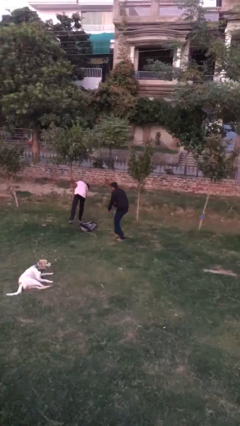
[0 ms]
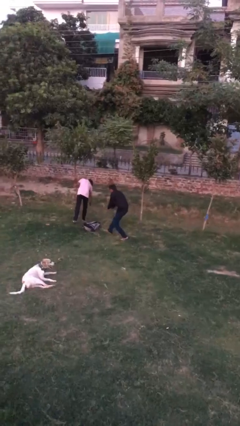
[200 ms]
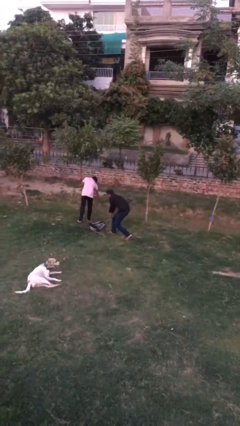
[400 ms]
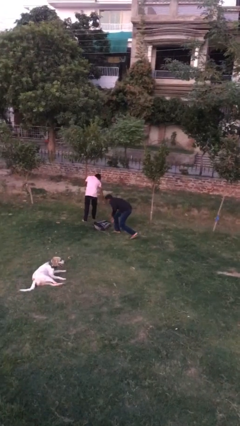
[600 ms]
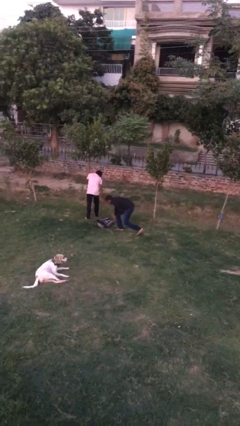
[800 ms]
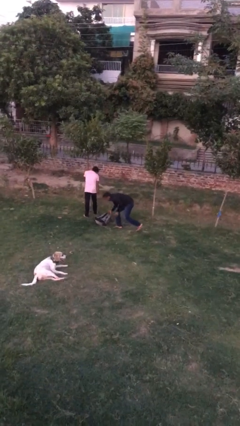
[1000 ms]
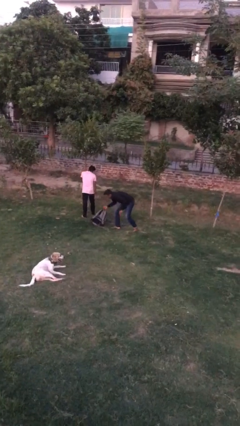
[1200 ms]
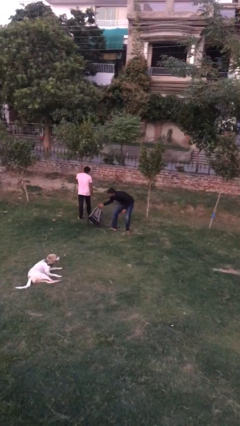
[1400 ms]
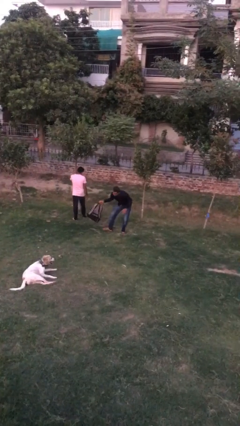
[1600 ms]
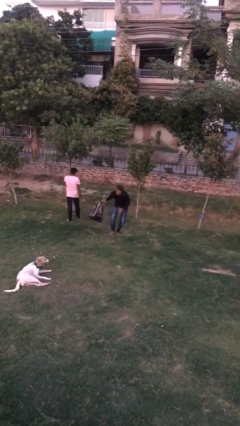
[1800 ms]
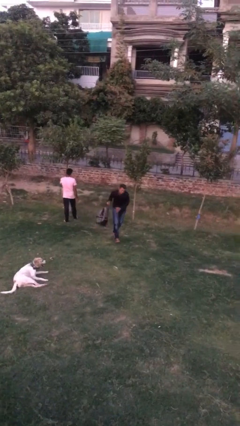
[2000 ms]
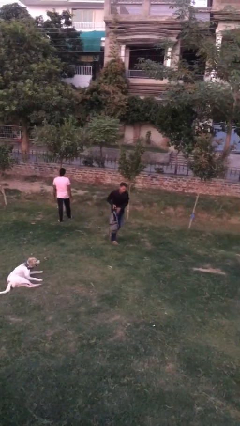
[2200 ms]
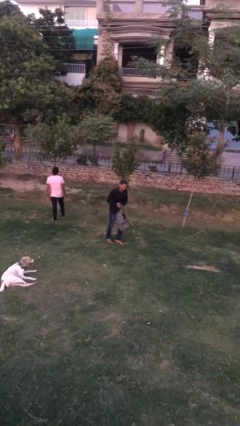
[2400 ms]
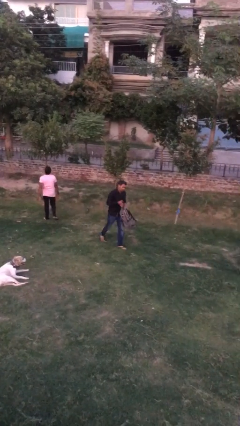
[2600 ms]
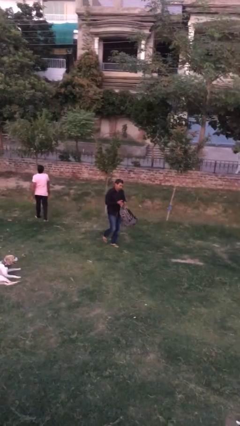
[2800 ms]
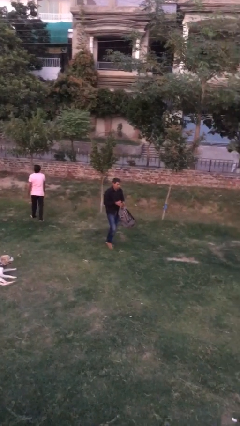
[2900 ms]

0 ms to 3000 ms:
person steals object from person

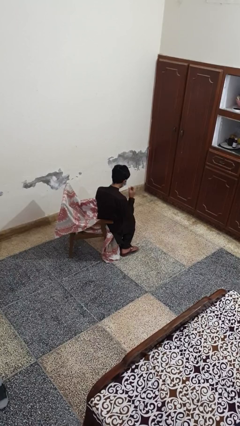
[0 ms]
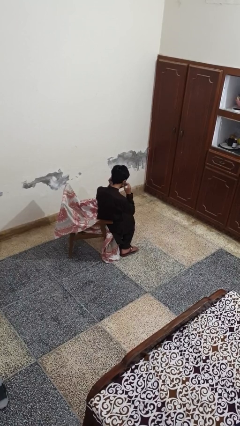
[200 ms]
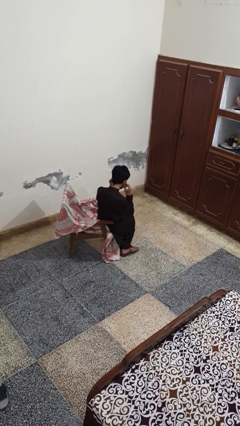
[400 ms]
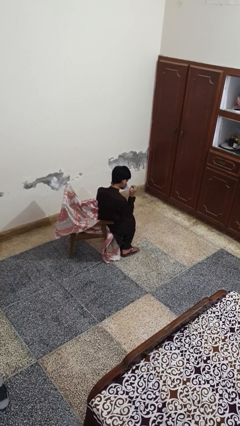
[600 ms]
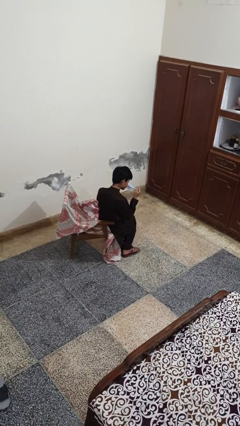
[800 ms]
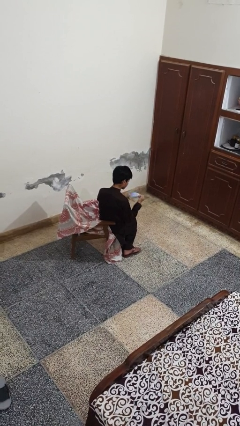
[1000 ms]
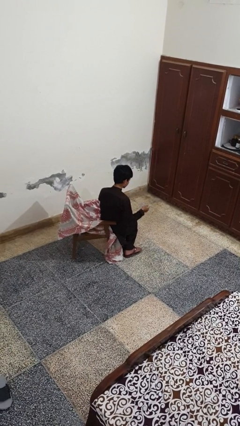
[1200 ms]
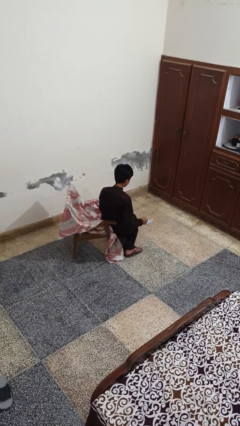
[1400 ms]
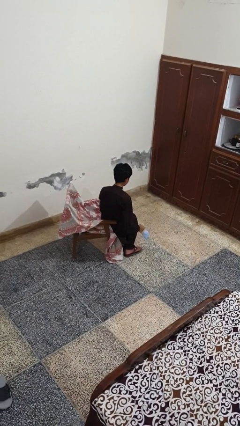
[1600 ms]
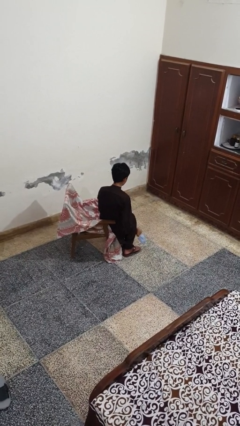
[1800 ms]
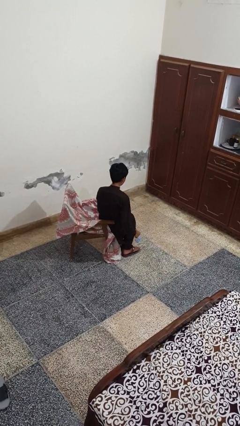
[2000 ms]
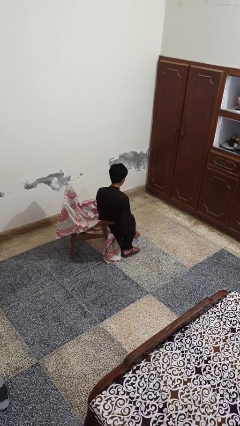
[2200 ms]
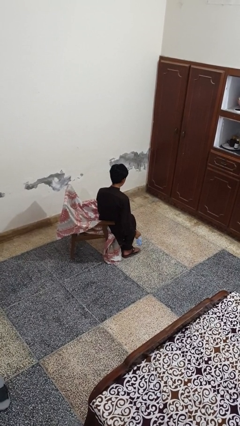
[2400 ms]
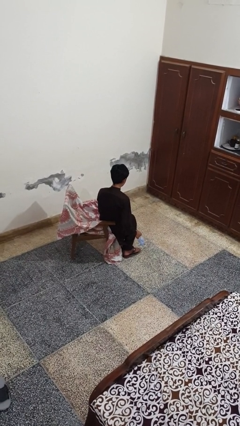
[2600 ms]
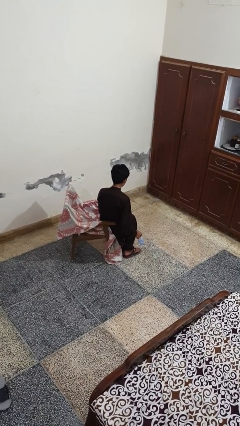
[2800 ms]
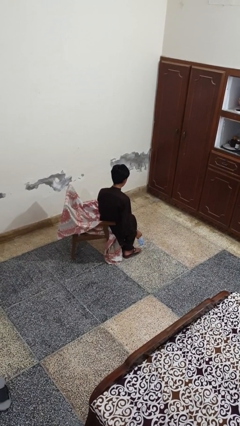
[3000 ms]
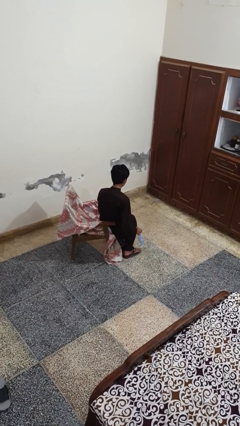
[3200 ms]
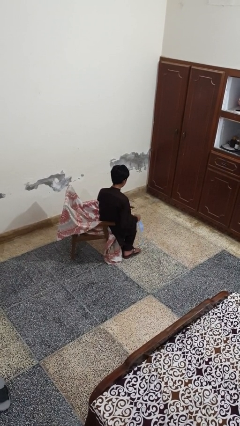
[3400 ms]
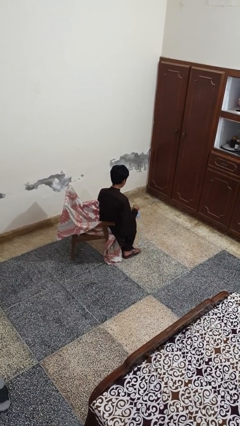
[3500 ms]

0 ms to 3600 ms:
person takes off facemask

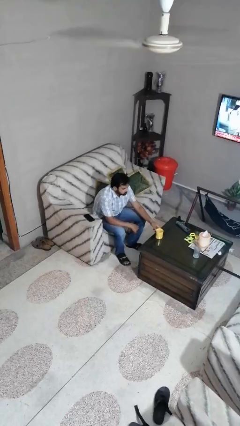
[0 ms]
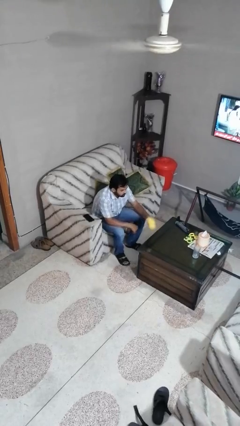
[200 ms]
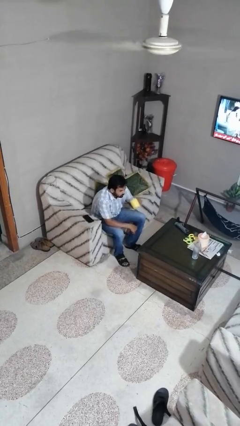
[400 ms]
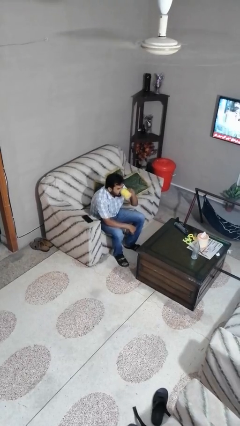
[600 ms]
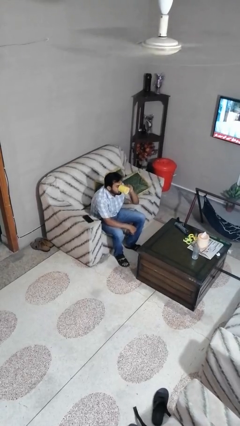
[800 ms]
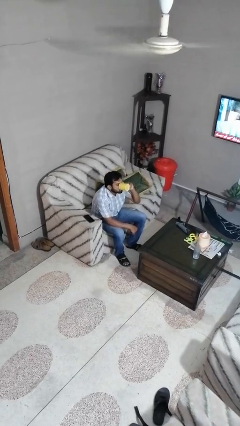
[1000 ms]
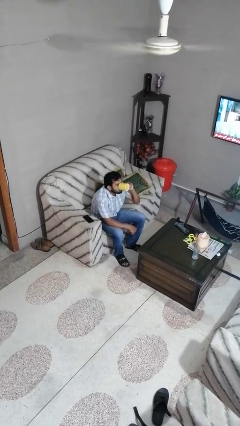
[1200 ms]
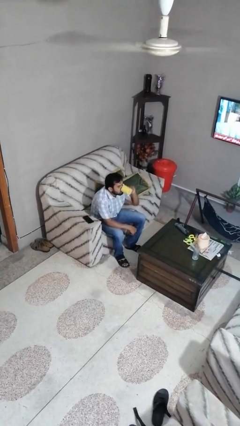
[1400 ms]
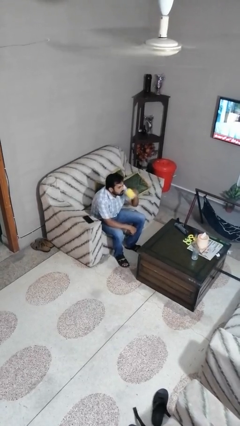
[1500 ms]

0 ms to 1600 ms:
person drinks from mug

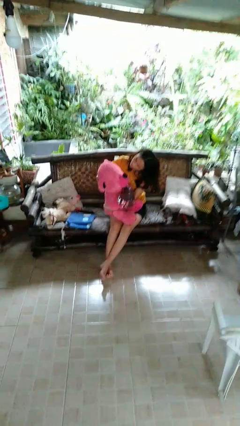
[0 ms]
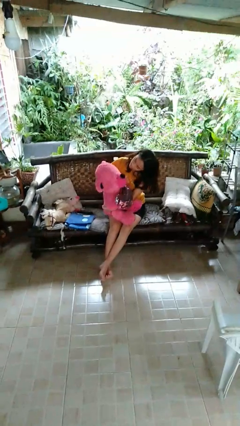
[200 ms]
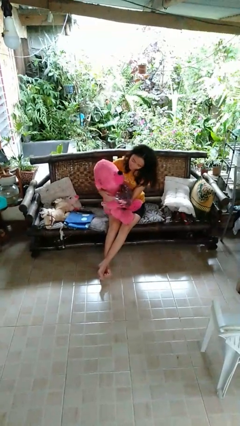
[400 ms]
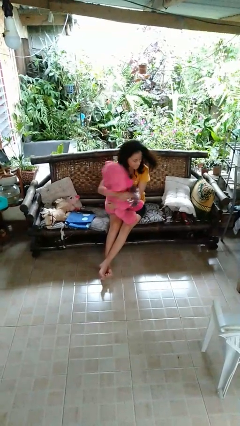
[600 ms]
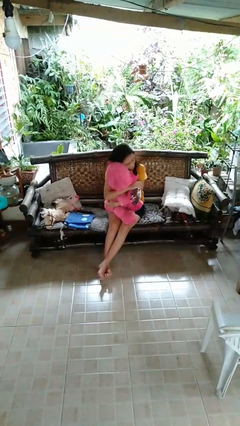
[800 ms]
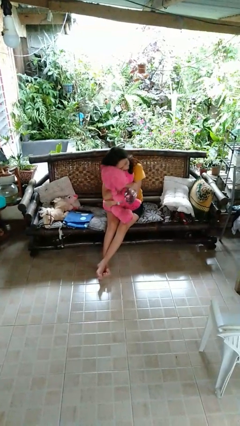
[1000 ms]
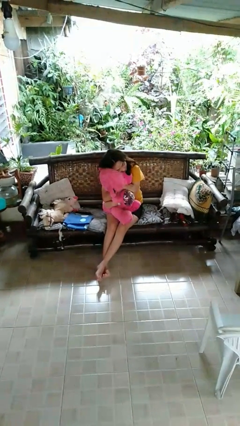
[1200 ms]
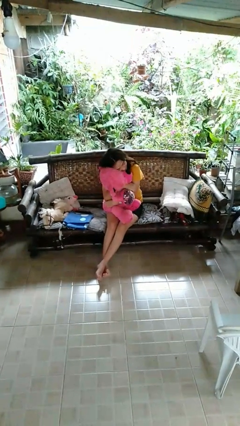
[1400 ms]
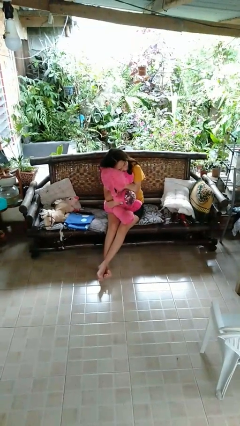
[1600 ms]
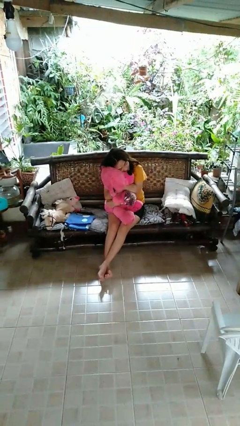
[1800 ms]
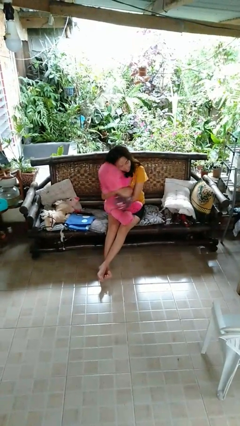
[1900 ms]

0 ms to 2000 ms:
person hugs stuffed animal

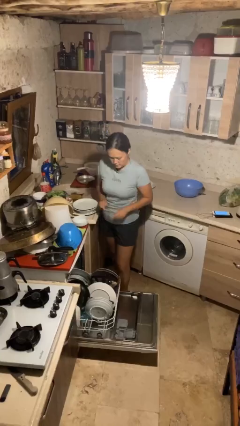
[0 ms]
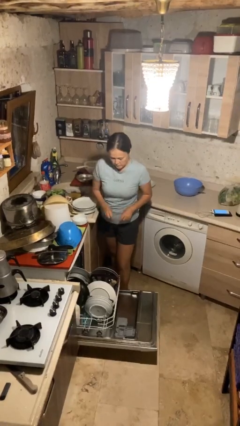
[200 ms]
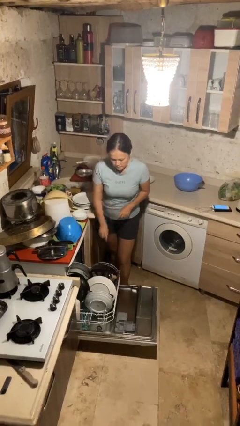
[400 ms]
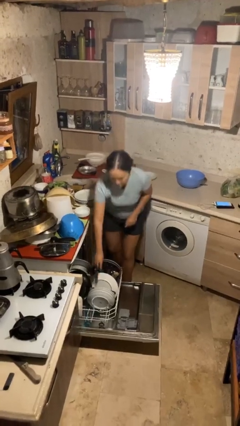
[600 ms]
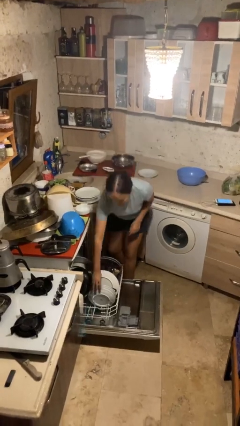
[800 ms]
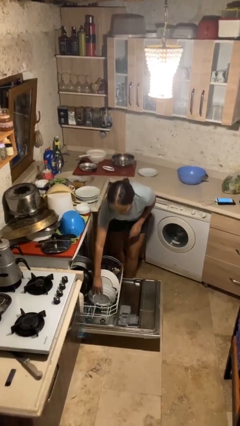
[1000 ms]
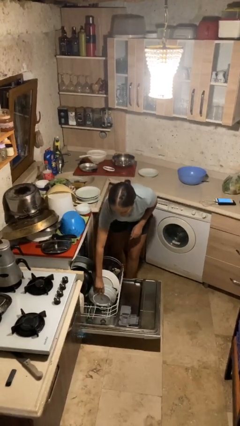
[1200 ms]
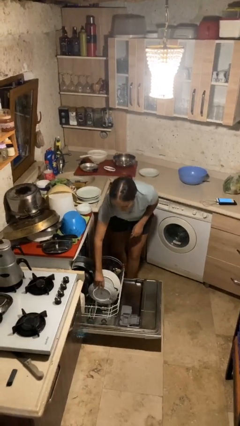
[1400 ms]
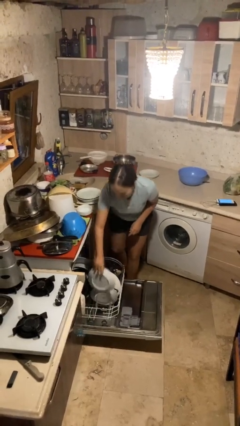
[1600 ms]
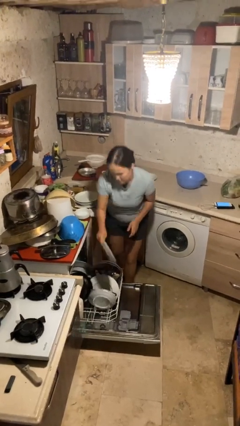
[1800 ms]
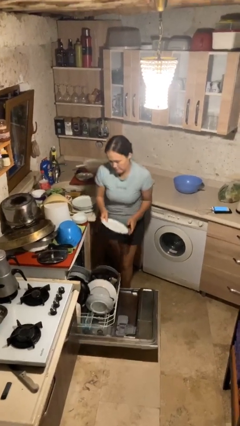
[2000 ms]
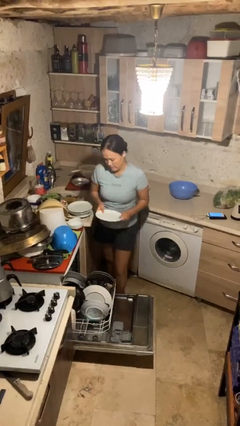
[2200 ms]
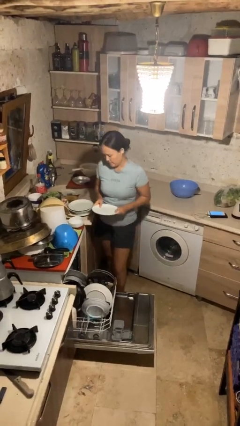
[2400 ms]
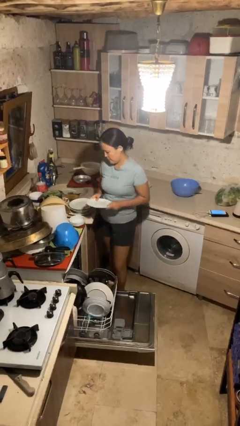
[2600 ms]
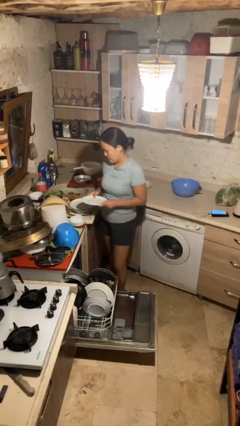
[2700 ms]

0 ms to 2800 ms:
person unloads dishwasher

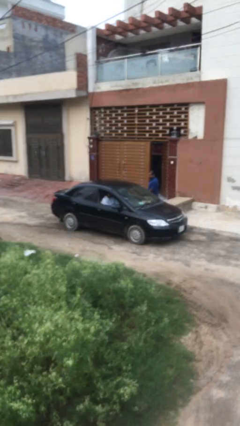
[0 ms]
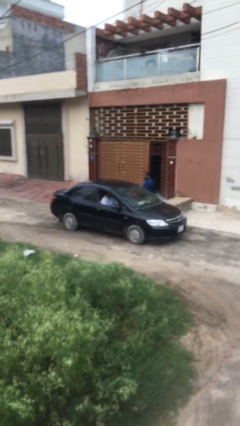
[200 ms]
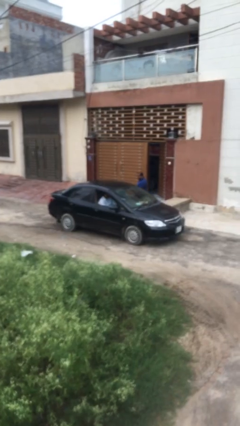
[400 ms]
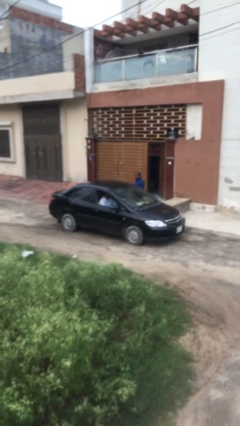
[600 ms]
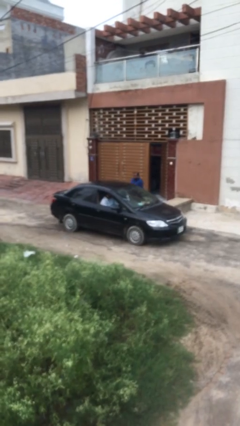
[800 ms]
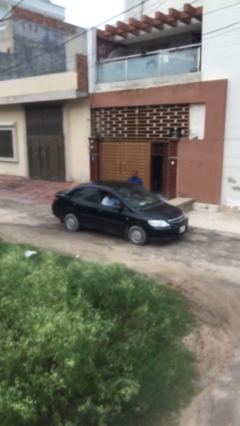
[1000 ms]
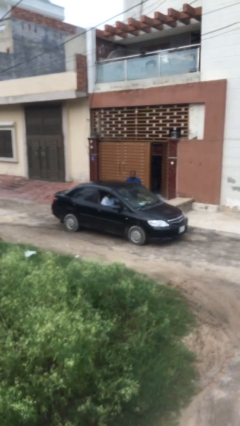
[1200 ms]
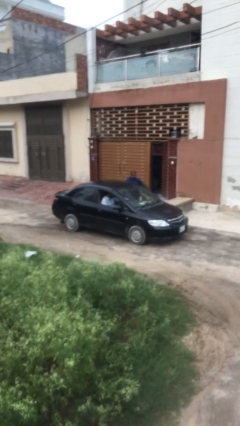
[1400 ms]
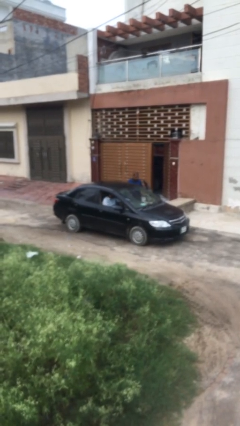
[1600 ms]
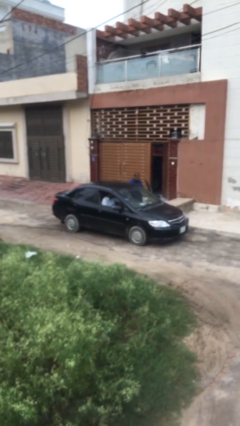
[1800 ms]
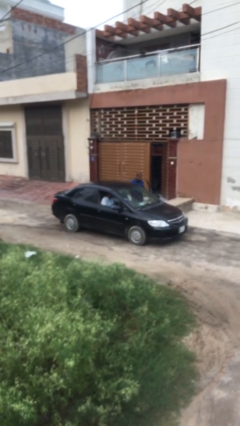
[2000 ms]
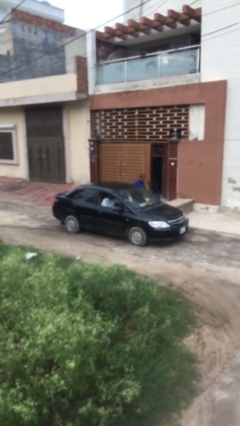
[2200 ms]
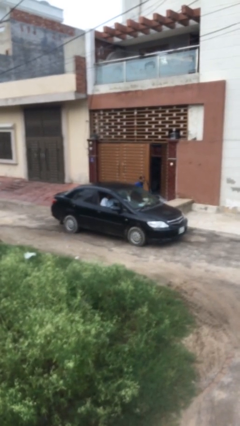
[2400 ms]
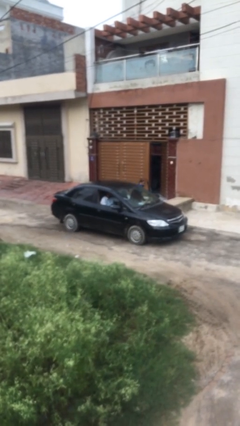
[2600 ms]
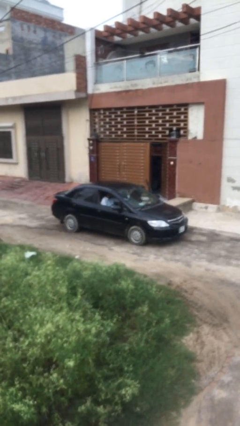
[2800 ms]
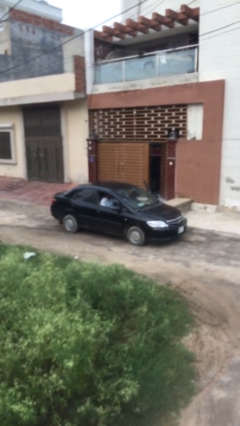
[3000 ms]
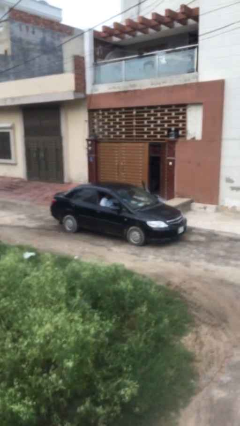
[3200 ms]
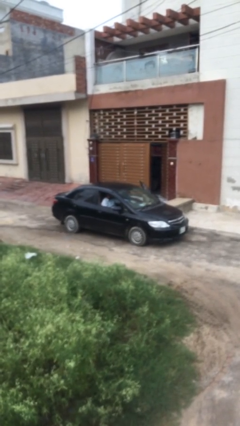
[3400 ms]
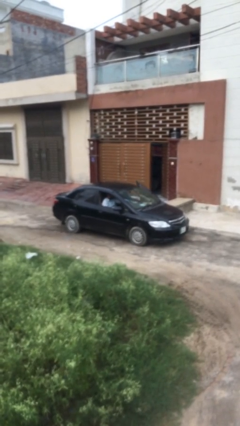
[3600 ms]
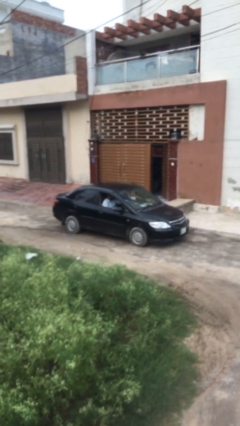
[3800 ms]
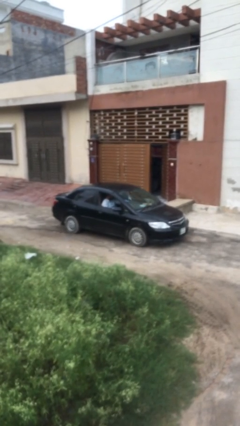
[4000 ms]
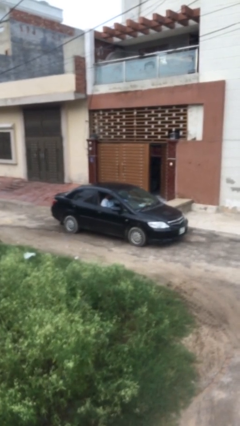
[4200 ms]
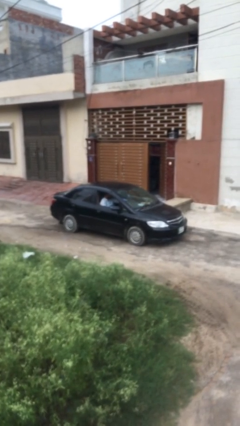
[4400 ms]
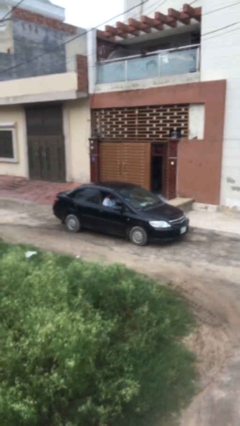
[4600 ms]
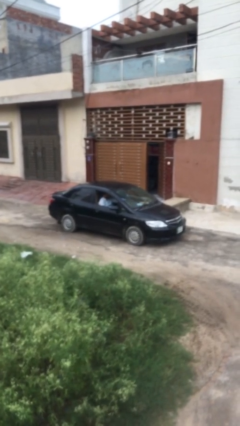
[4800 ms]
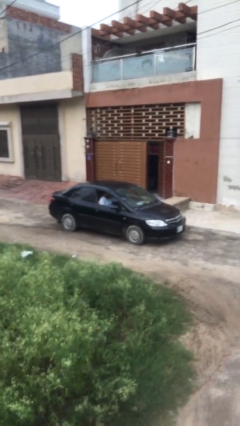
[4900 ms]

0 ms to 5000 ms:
car picks up person
